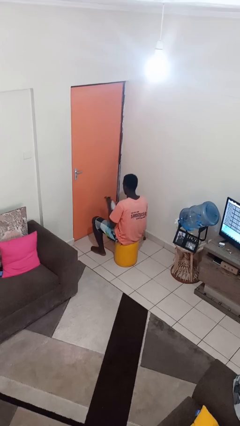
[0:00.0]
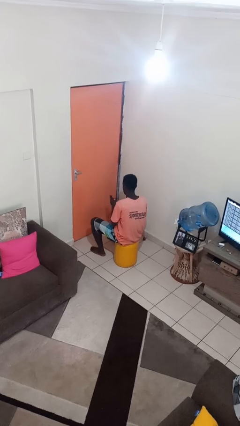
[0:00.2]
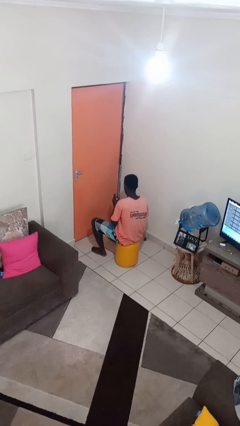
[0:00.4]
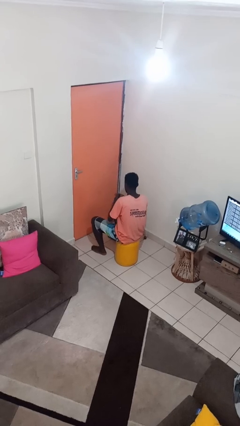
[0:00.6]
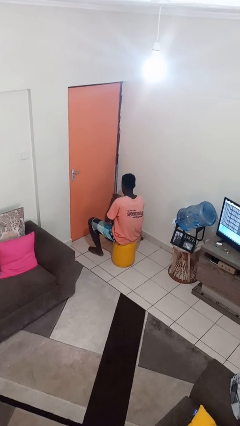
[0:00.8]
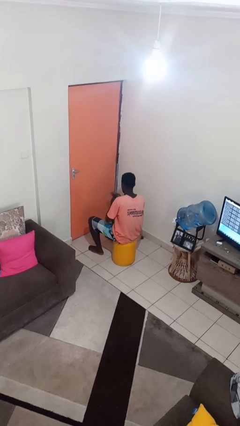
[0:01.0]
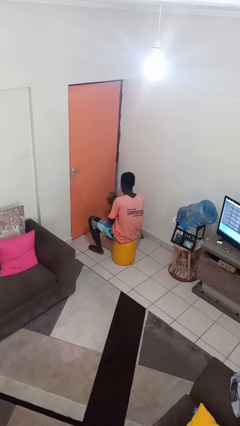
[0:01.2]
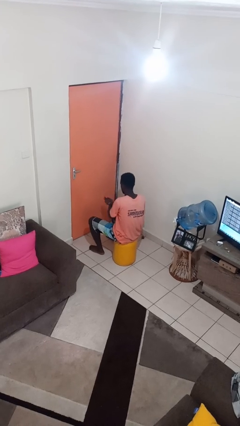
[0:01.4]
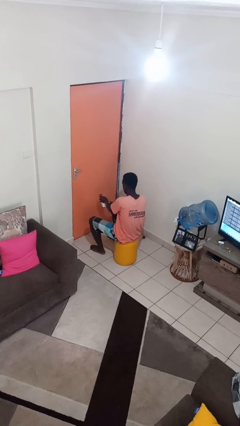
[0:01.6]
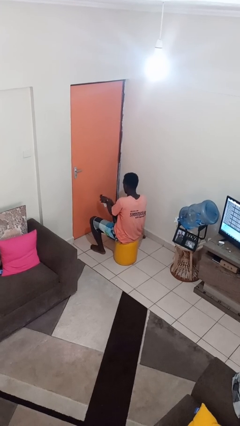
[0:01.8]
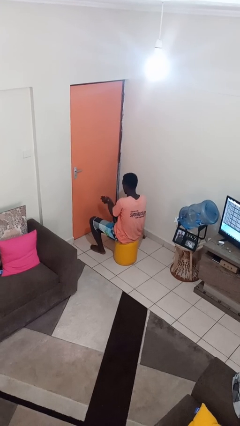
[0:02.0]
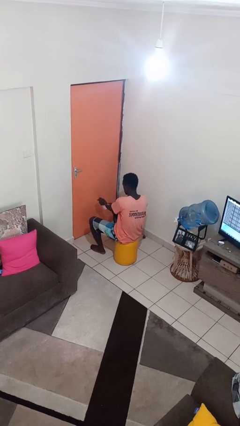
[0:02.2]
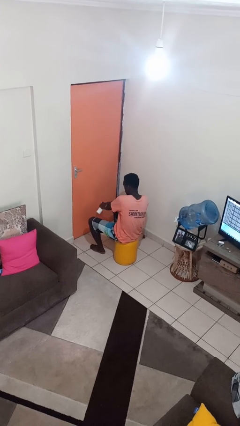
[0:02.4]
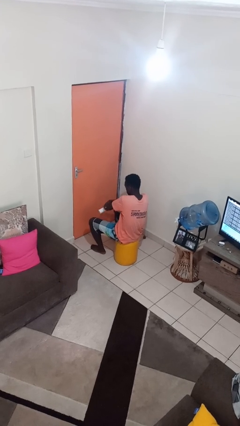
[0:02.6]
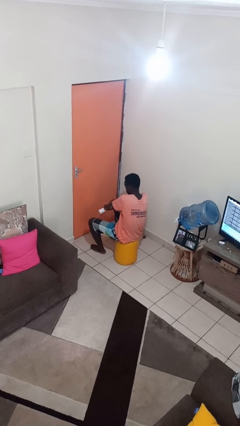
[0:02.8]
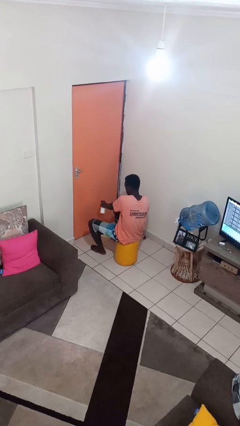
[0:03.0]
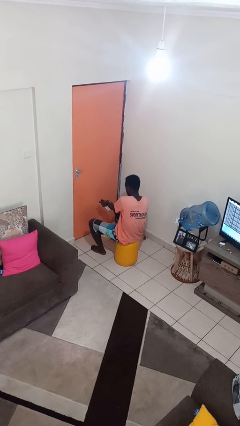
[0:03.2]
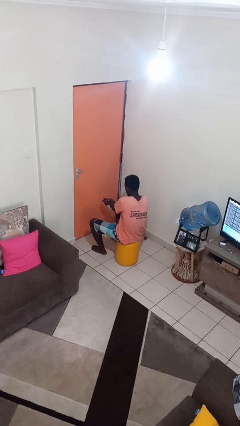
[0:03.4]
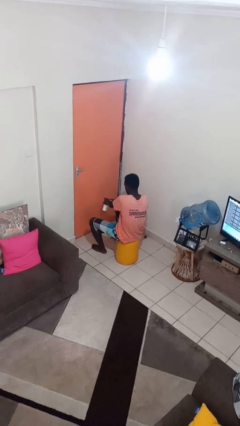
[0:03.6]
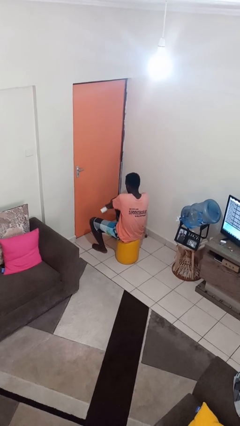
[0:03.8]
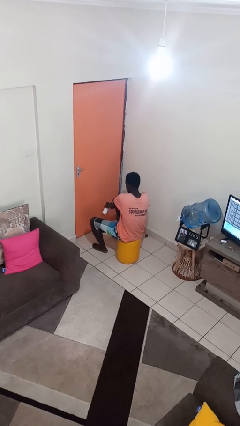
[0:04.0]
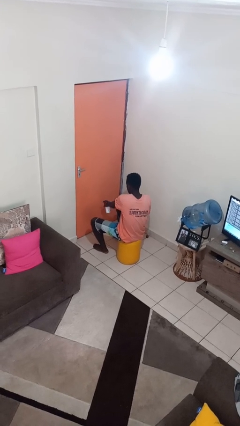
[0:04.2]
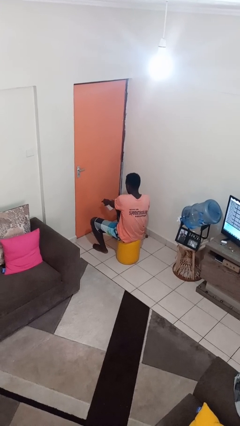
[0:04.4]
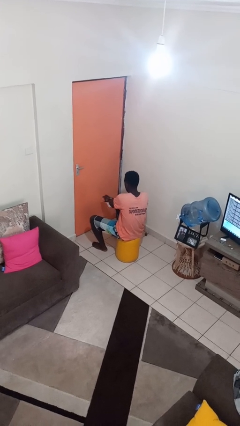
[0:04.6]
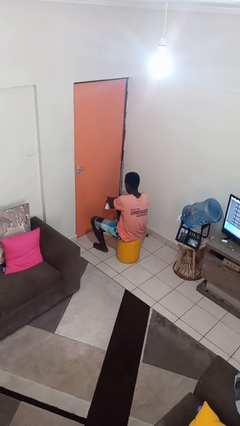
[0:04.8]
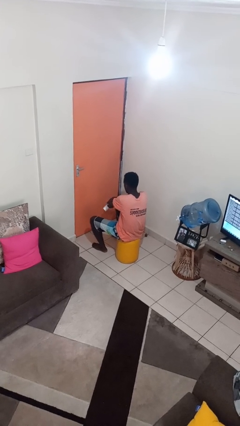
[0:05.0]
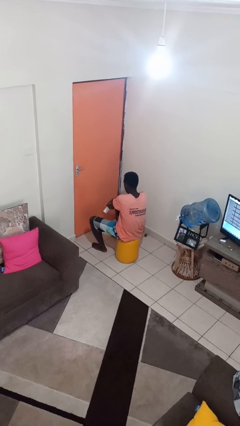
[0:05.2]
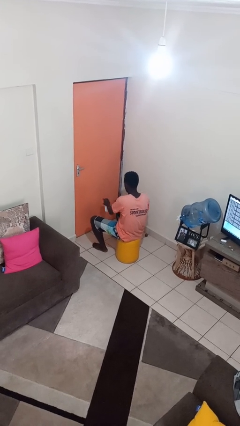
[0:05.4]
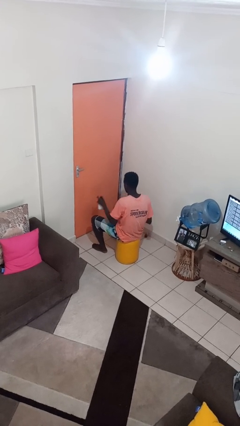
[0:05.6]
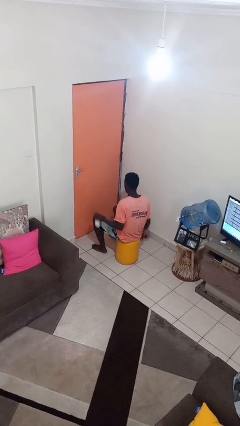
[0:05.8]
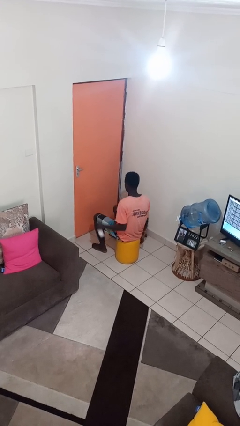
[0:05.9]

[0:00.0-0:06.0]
person applies sunscreen

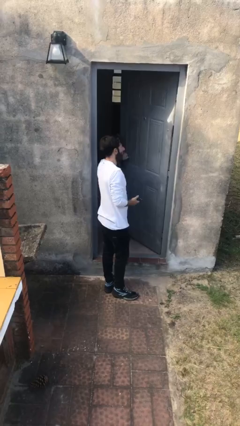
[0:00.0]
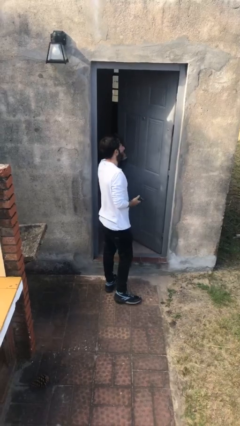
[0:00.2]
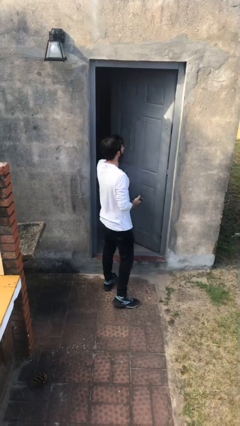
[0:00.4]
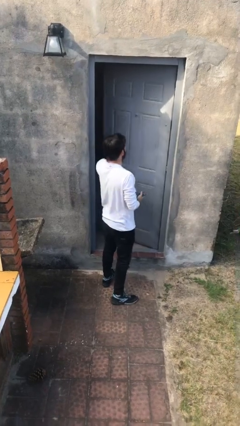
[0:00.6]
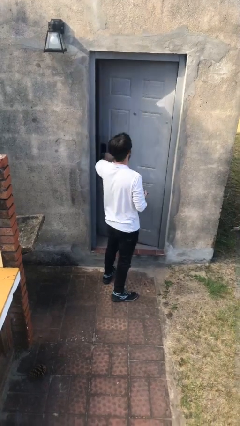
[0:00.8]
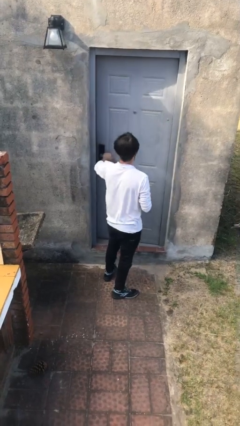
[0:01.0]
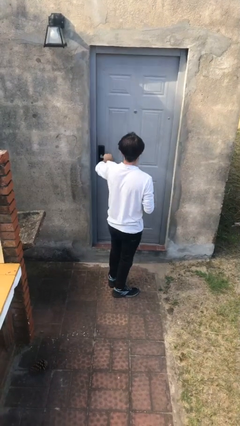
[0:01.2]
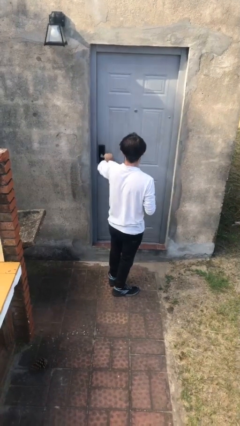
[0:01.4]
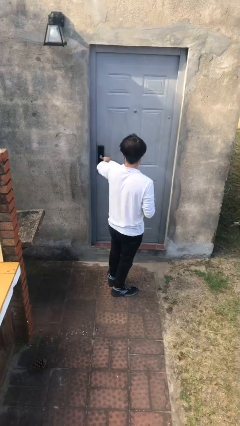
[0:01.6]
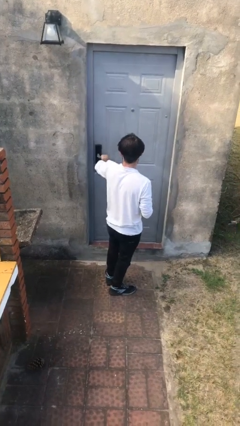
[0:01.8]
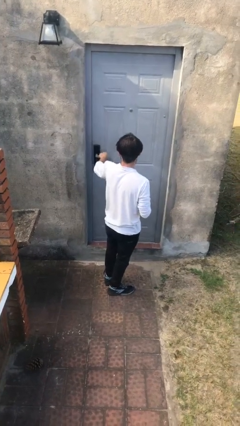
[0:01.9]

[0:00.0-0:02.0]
person closes facility door

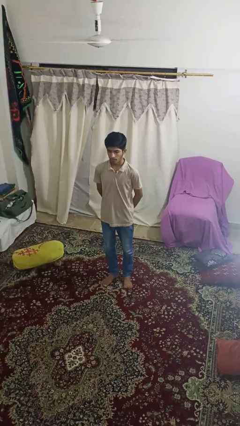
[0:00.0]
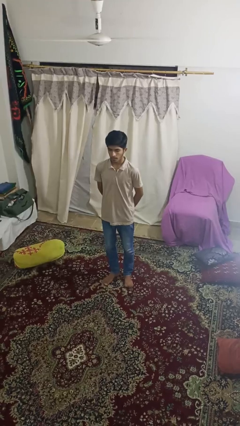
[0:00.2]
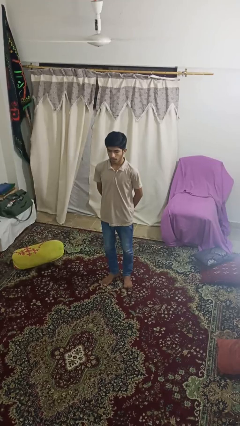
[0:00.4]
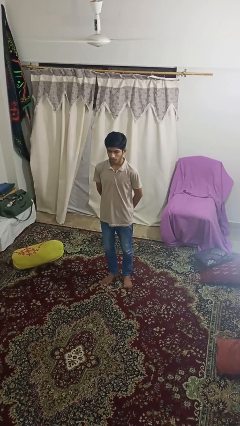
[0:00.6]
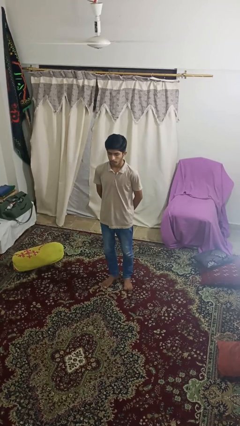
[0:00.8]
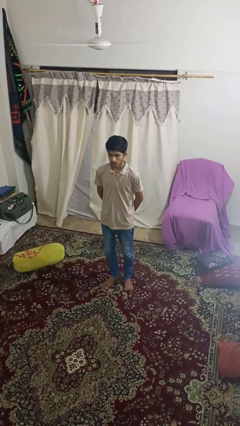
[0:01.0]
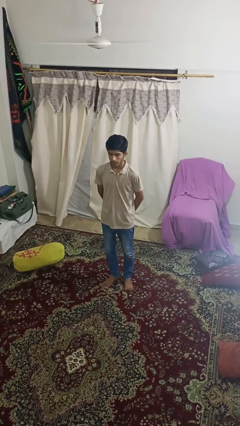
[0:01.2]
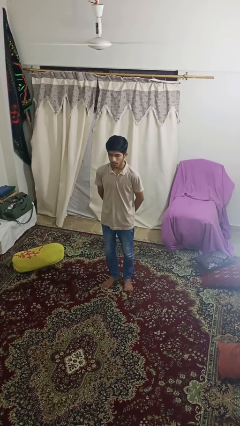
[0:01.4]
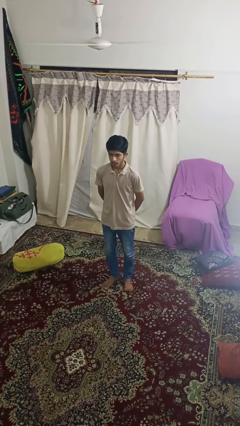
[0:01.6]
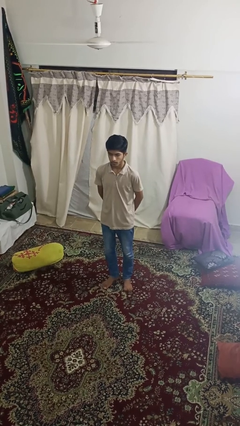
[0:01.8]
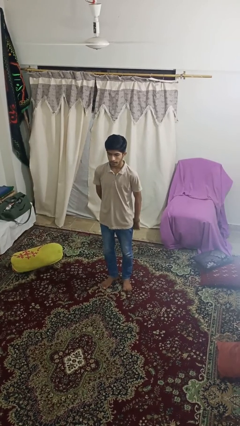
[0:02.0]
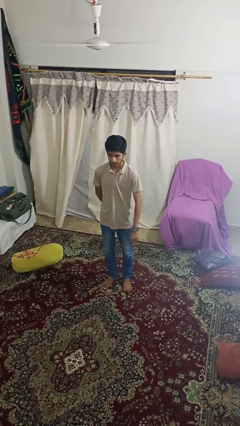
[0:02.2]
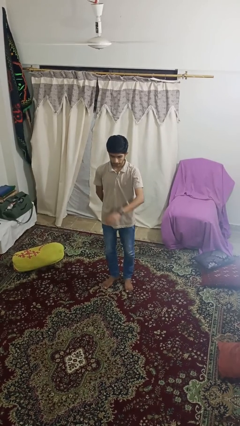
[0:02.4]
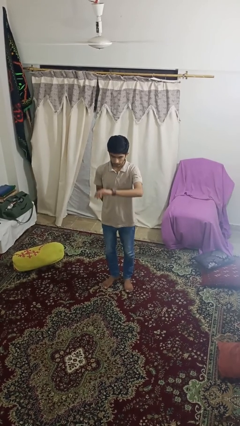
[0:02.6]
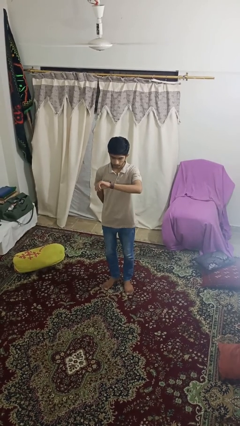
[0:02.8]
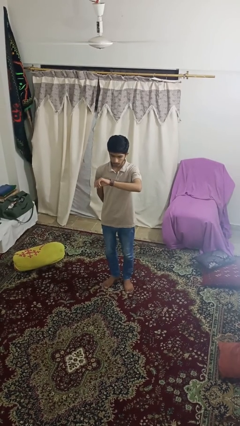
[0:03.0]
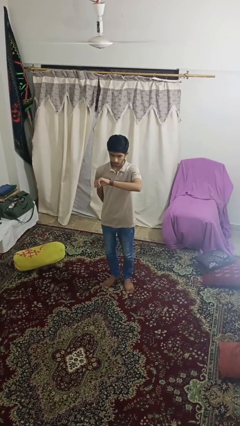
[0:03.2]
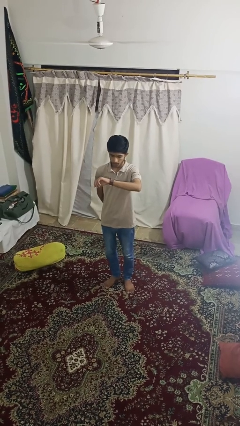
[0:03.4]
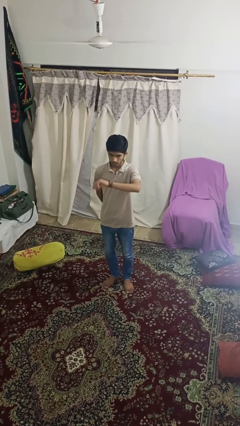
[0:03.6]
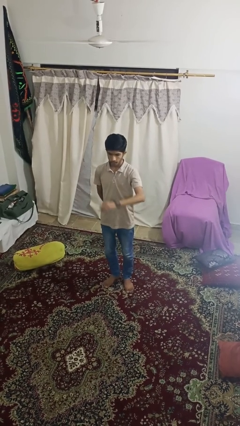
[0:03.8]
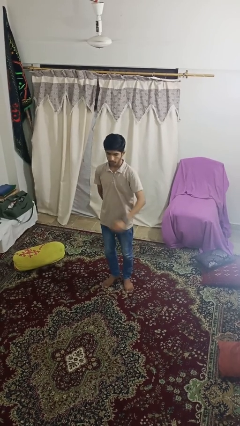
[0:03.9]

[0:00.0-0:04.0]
person looks at wristwatch

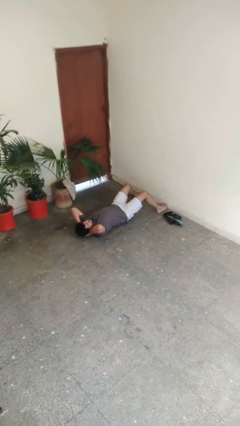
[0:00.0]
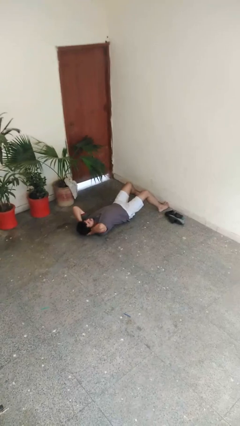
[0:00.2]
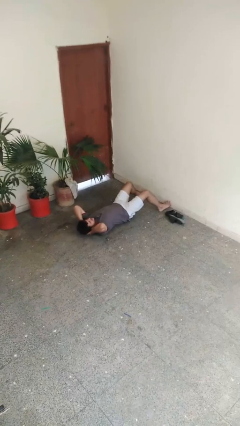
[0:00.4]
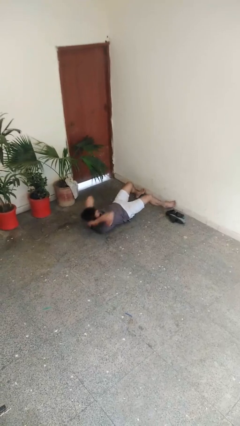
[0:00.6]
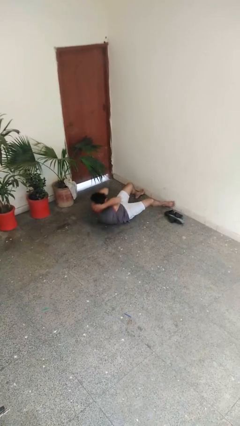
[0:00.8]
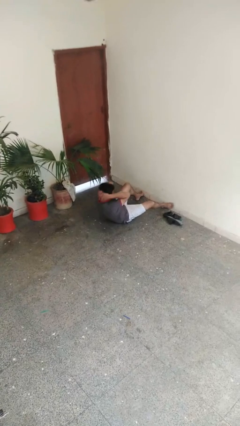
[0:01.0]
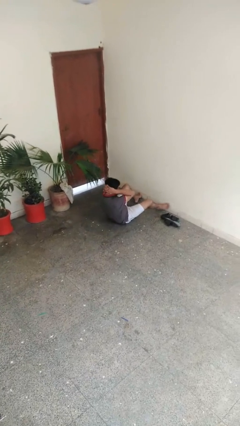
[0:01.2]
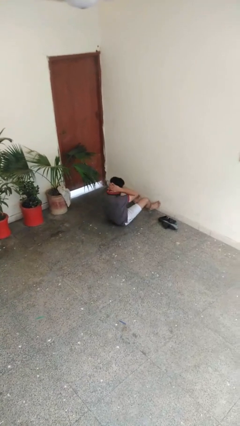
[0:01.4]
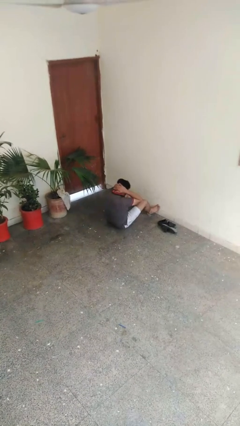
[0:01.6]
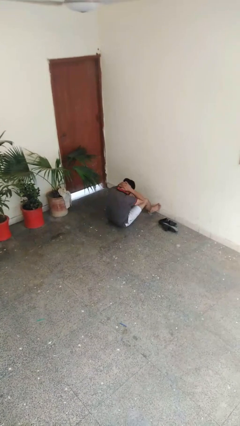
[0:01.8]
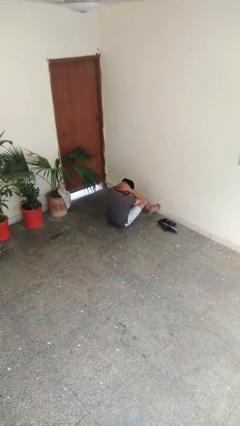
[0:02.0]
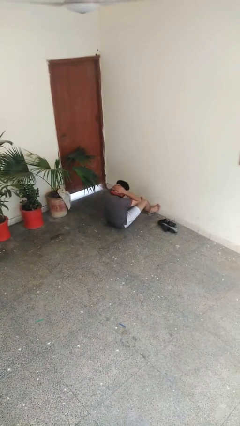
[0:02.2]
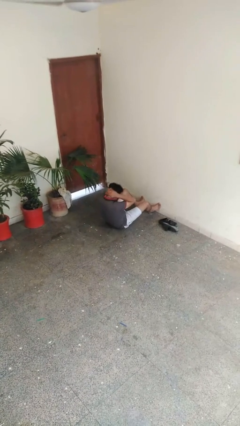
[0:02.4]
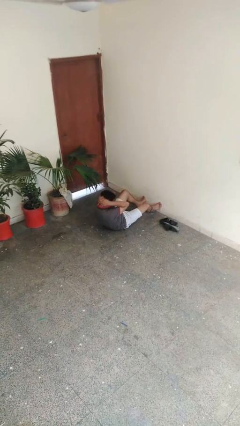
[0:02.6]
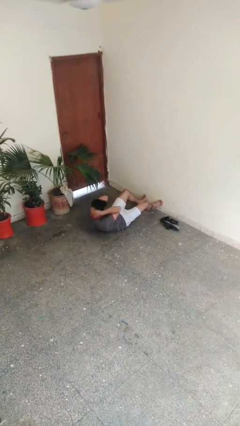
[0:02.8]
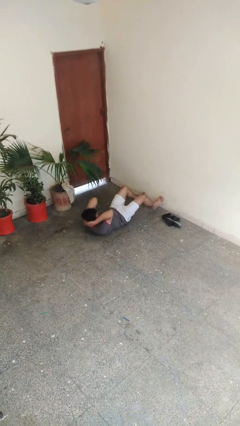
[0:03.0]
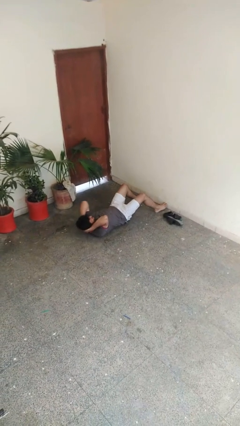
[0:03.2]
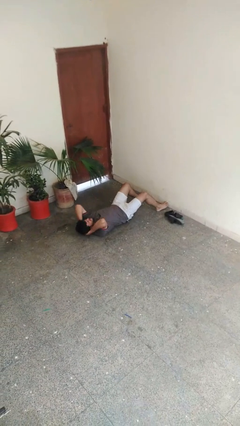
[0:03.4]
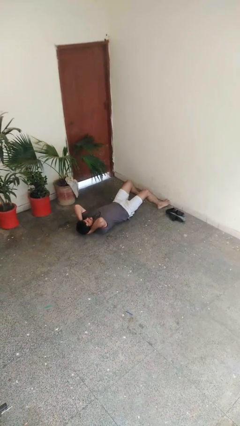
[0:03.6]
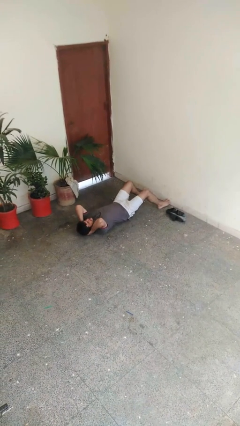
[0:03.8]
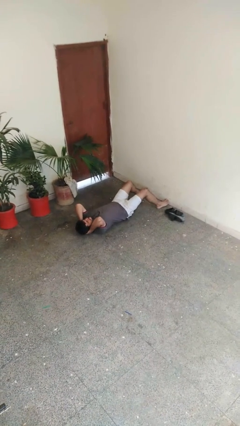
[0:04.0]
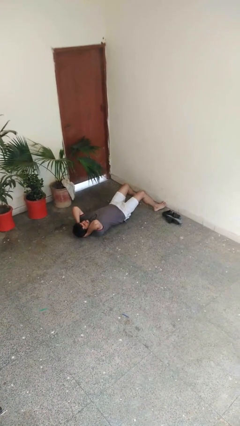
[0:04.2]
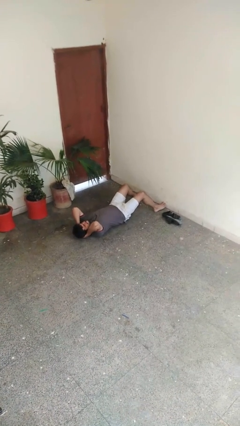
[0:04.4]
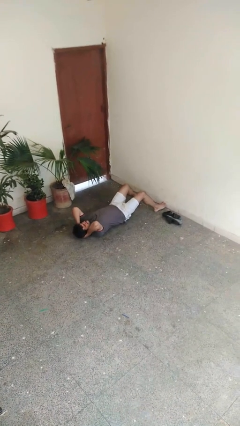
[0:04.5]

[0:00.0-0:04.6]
person exercises with situp

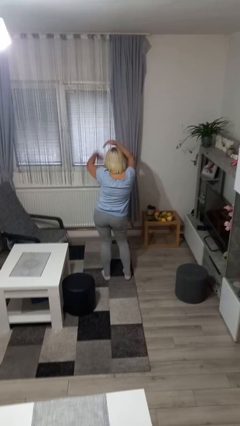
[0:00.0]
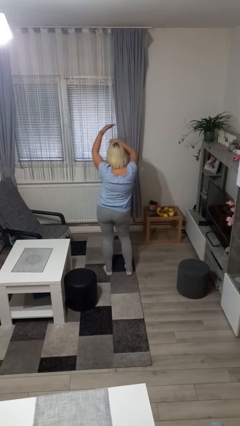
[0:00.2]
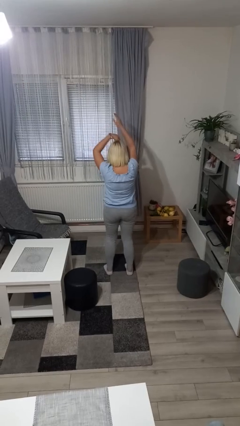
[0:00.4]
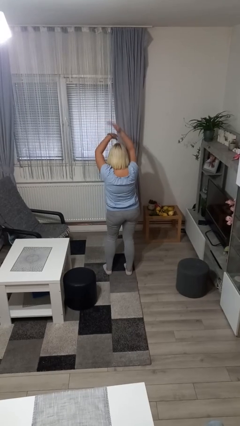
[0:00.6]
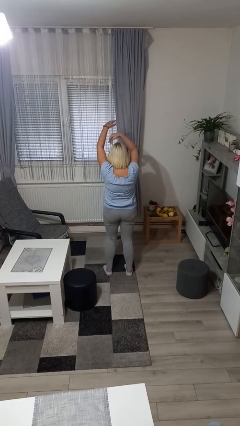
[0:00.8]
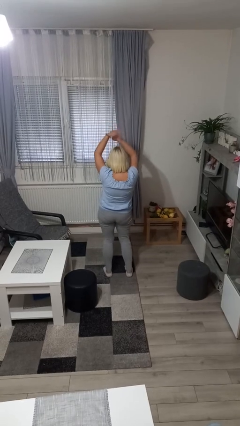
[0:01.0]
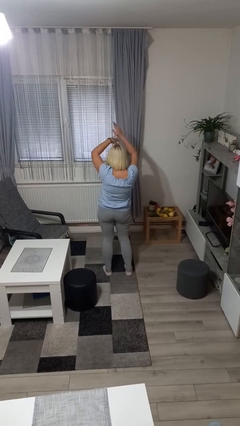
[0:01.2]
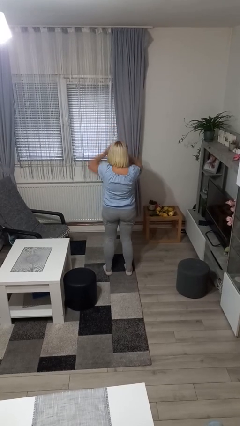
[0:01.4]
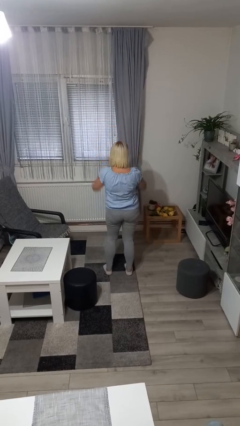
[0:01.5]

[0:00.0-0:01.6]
person dances in place
